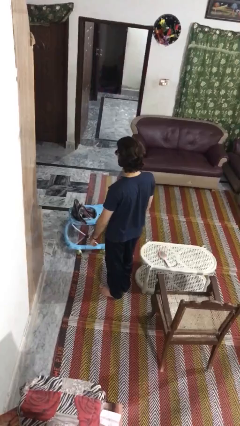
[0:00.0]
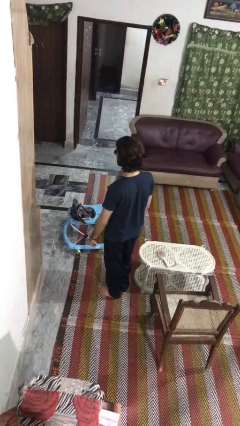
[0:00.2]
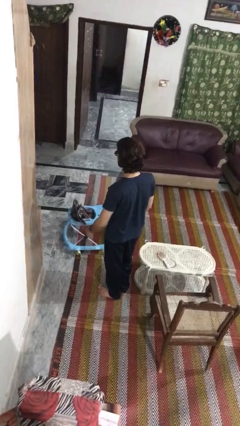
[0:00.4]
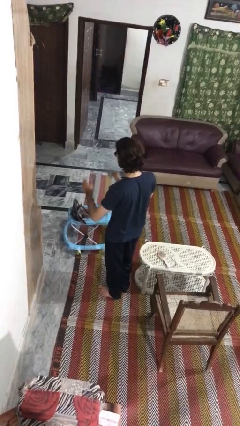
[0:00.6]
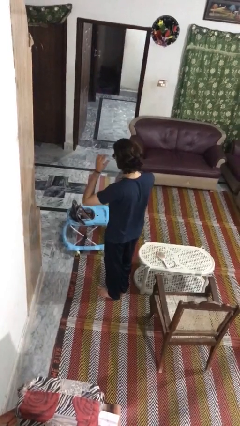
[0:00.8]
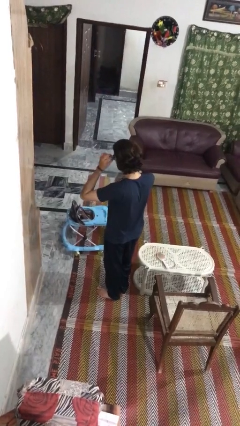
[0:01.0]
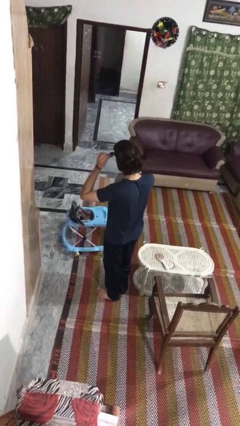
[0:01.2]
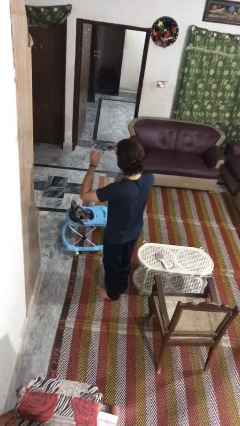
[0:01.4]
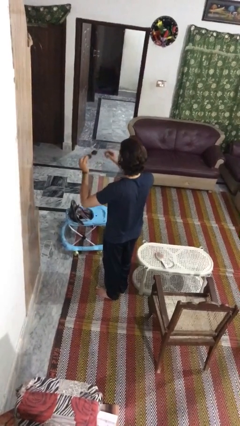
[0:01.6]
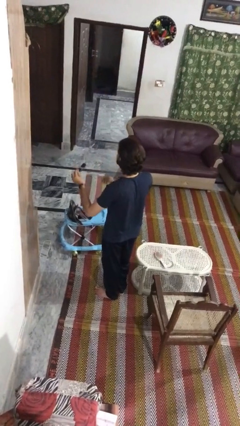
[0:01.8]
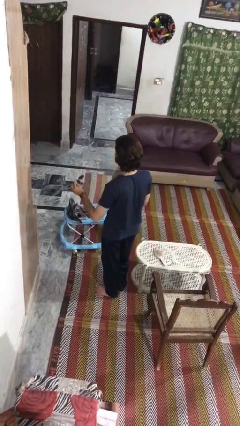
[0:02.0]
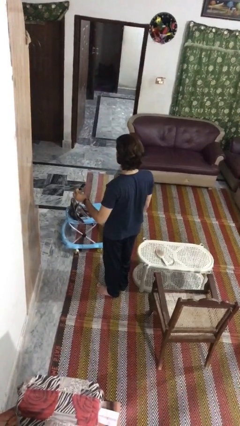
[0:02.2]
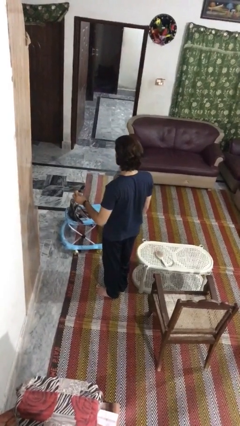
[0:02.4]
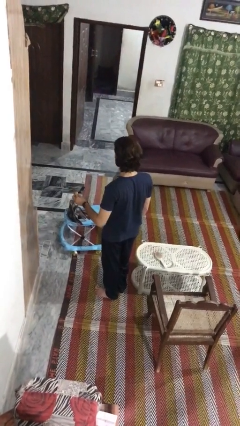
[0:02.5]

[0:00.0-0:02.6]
person takes off sunglasses

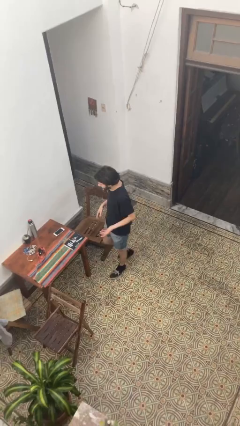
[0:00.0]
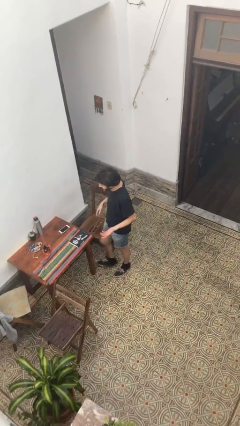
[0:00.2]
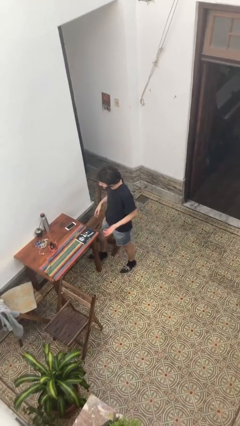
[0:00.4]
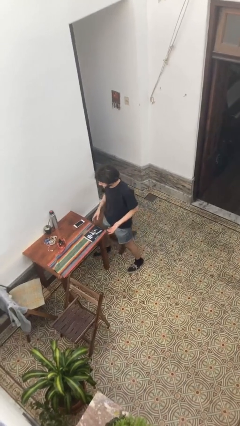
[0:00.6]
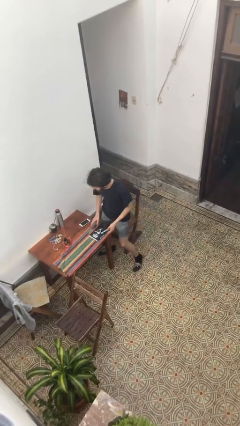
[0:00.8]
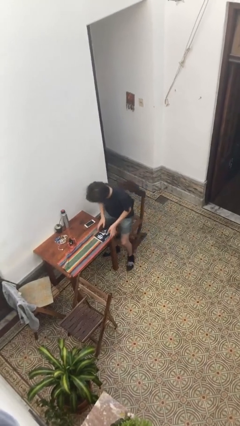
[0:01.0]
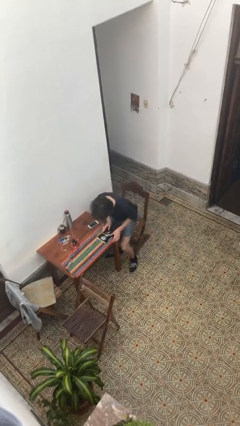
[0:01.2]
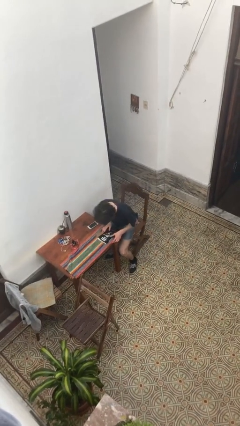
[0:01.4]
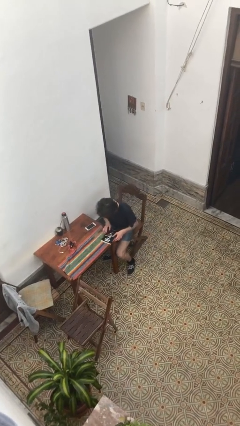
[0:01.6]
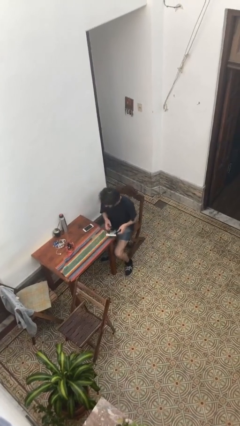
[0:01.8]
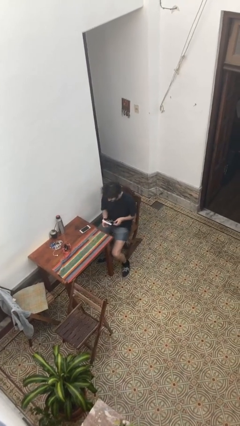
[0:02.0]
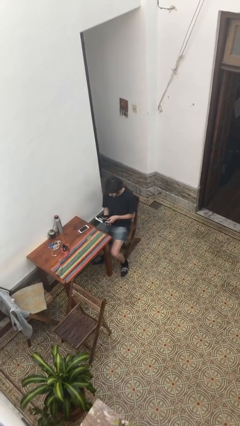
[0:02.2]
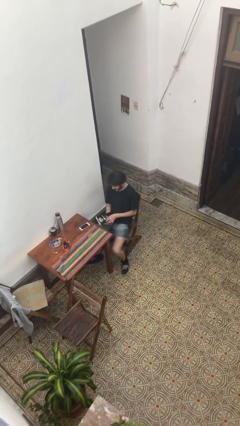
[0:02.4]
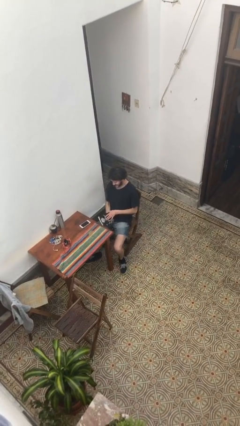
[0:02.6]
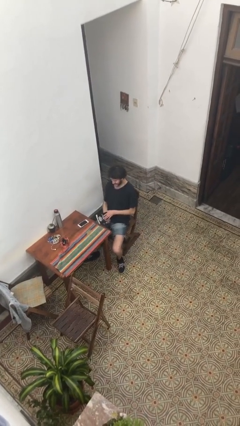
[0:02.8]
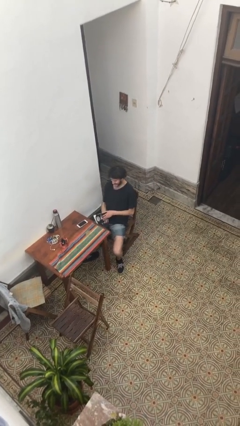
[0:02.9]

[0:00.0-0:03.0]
person sits down

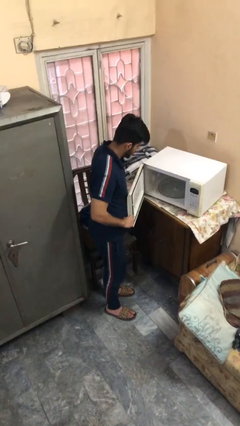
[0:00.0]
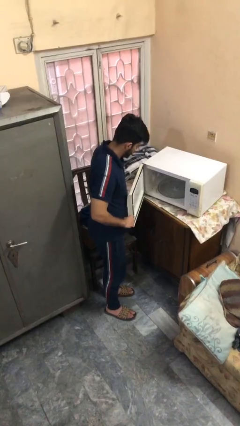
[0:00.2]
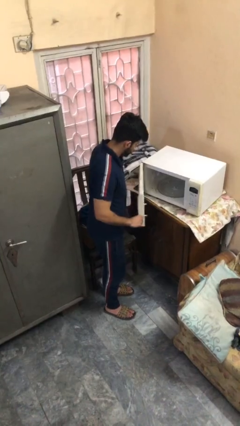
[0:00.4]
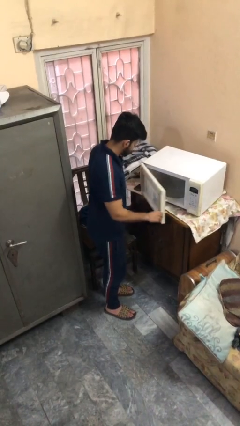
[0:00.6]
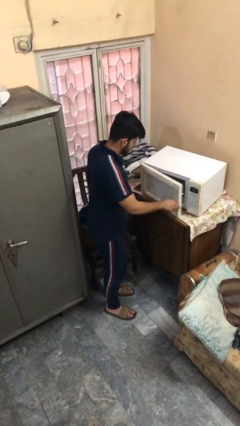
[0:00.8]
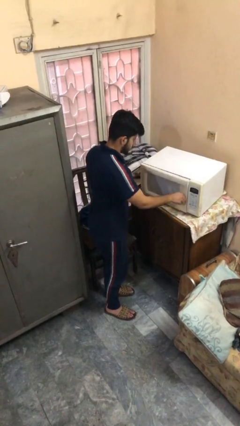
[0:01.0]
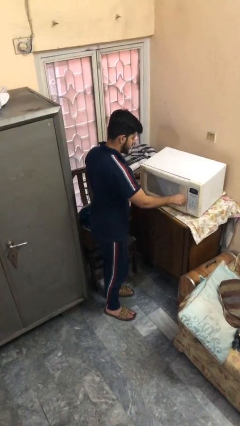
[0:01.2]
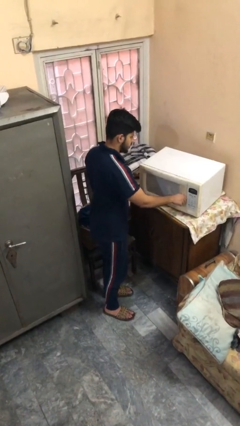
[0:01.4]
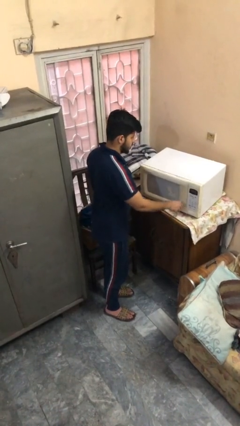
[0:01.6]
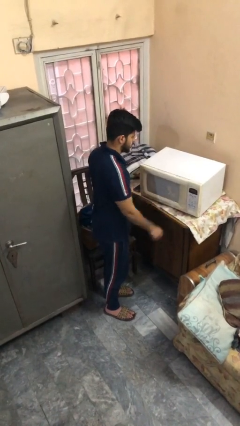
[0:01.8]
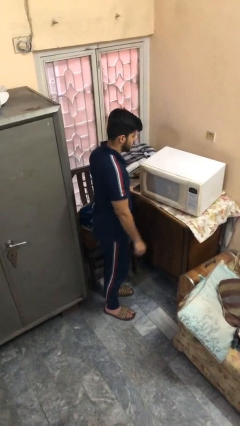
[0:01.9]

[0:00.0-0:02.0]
person closes microwave

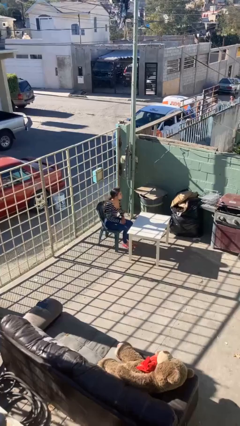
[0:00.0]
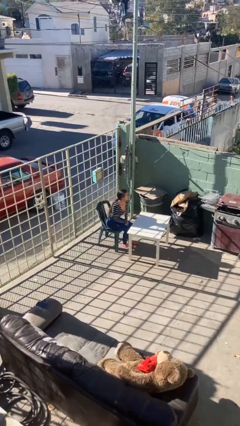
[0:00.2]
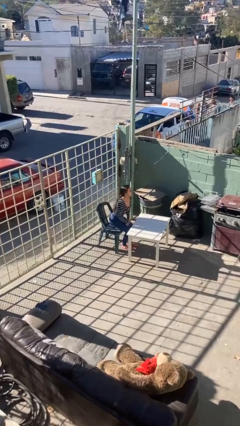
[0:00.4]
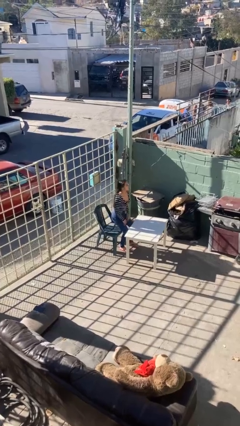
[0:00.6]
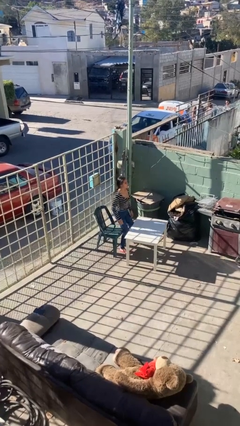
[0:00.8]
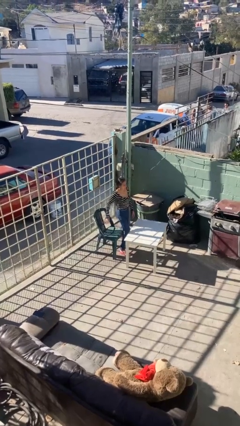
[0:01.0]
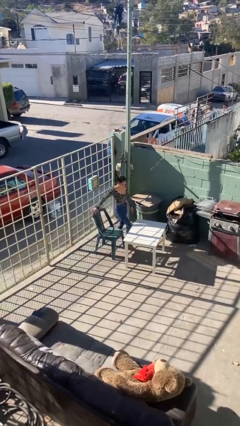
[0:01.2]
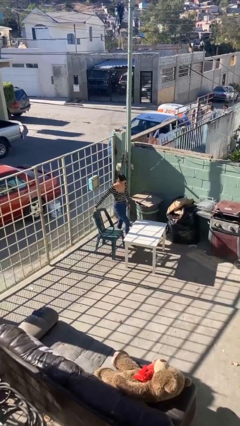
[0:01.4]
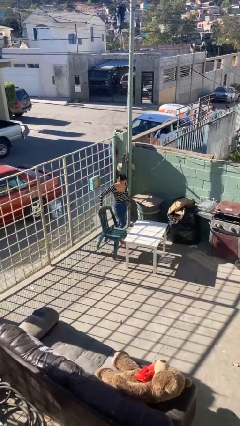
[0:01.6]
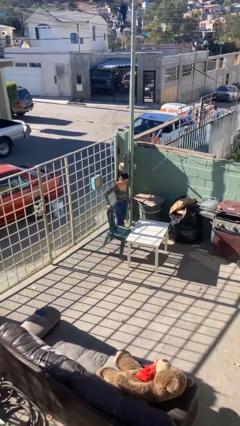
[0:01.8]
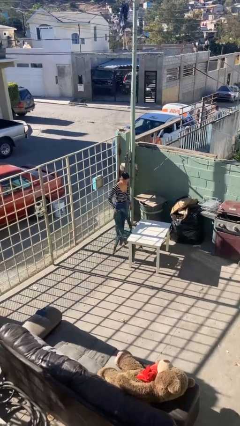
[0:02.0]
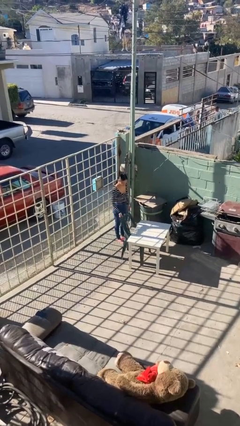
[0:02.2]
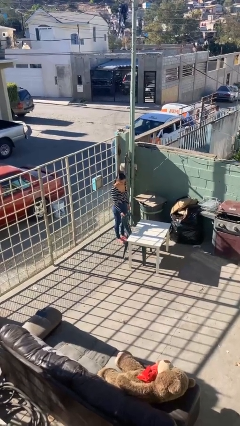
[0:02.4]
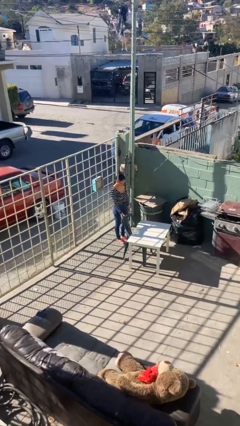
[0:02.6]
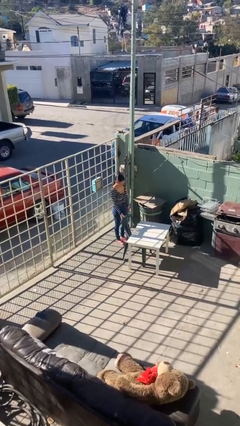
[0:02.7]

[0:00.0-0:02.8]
person stands up

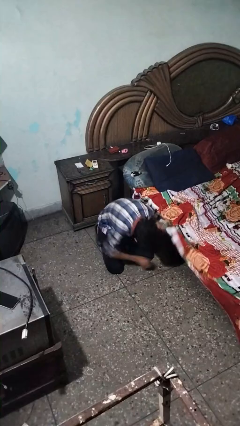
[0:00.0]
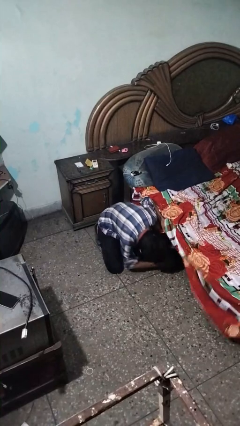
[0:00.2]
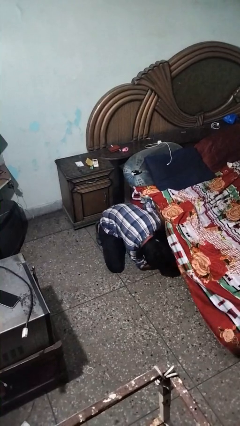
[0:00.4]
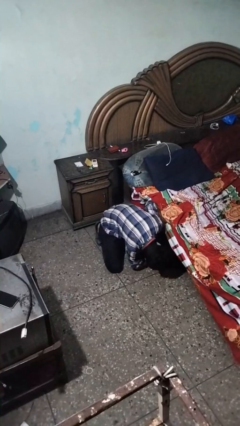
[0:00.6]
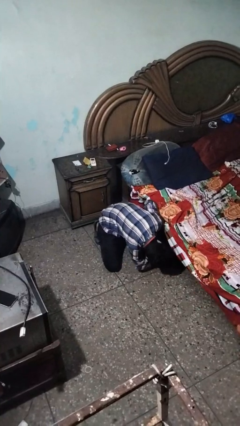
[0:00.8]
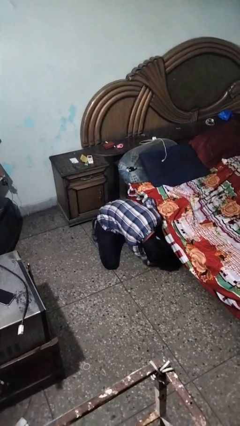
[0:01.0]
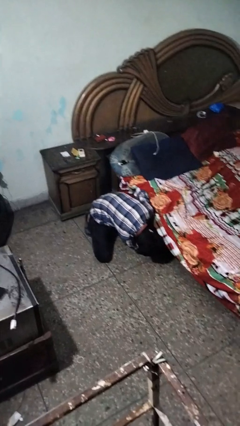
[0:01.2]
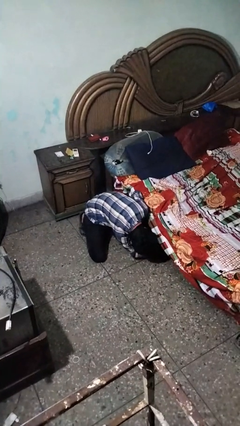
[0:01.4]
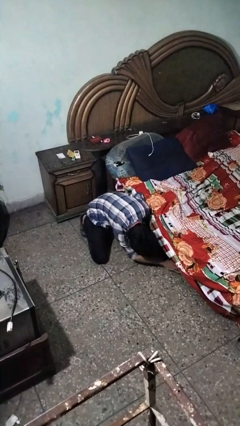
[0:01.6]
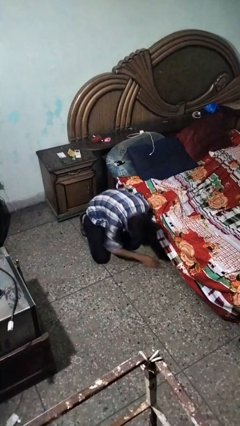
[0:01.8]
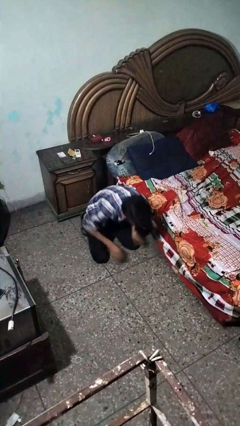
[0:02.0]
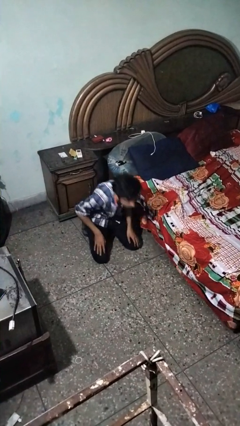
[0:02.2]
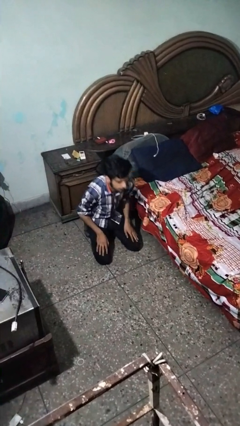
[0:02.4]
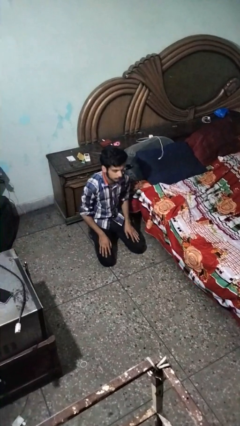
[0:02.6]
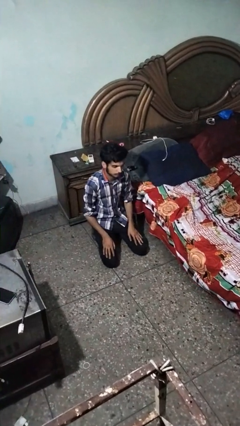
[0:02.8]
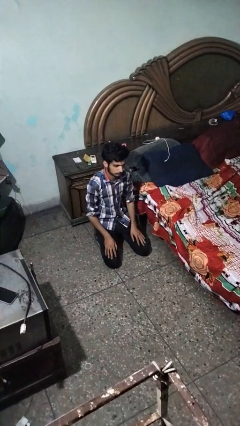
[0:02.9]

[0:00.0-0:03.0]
person searches under bed

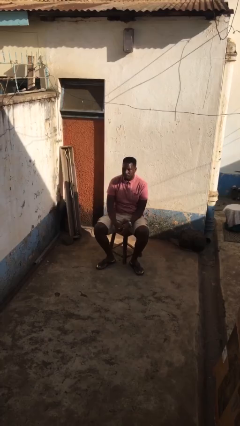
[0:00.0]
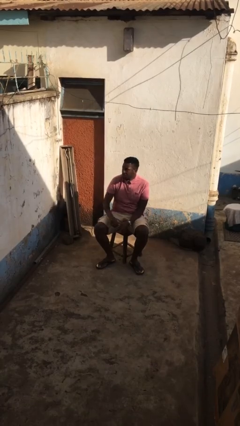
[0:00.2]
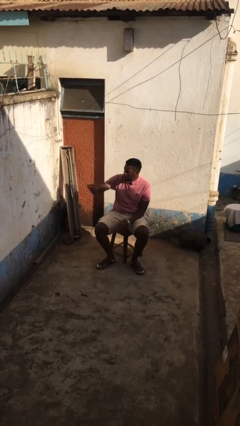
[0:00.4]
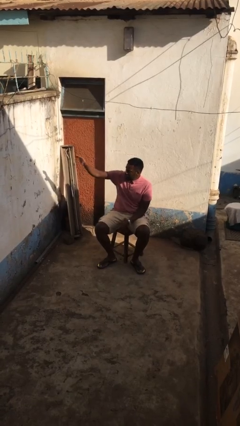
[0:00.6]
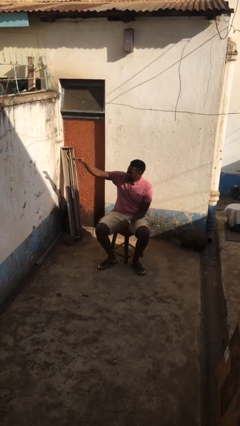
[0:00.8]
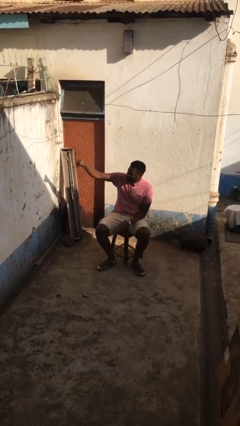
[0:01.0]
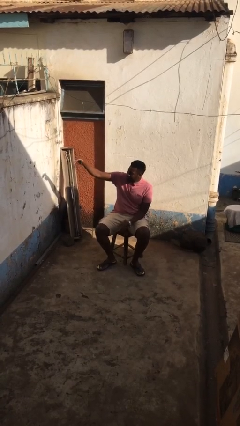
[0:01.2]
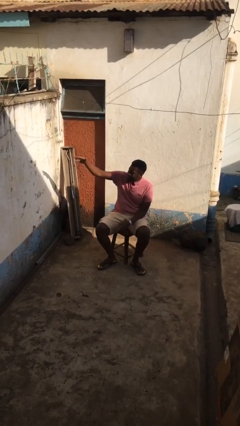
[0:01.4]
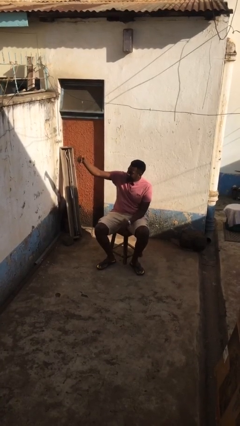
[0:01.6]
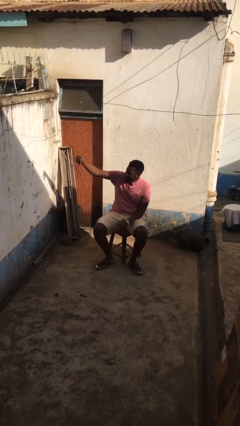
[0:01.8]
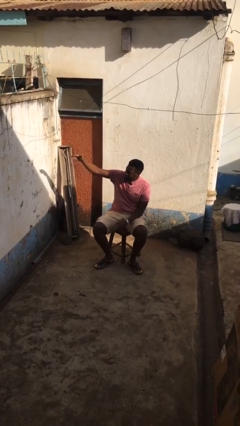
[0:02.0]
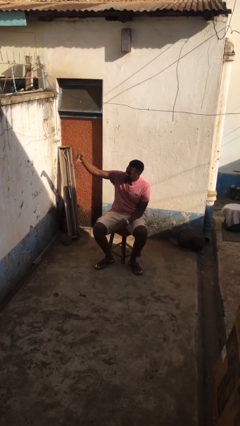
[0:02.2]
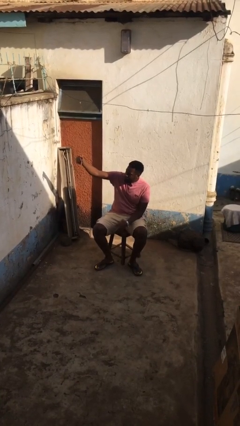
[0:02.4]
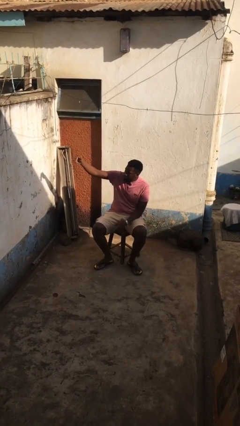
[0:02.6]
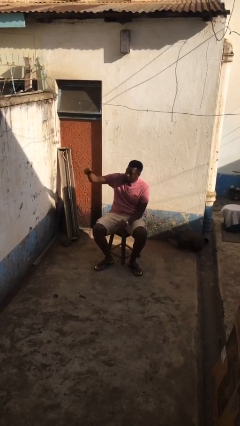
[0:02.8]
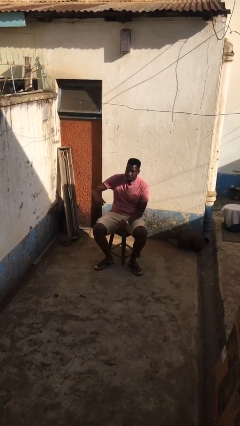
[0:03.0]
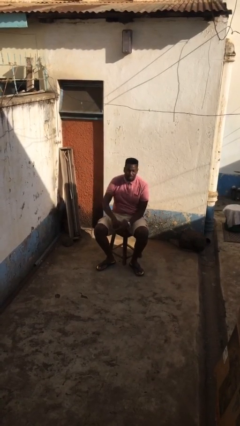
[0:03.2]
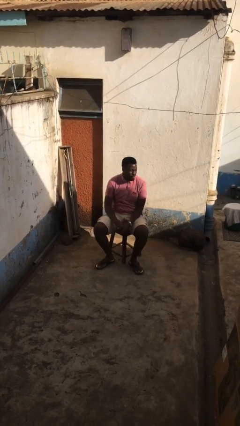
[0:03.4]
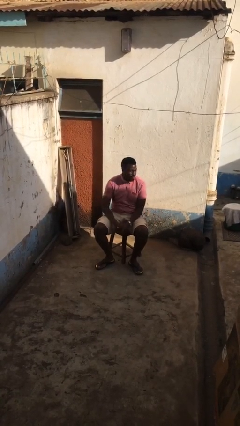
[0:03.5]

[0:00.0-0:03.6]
person gestures come here

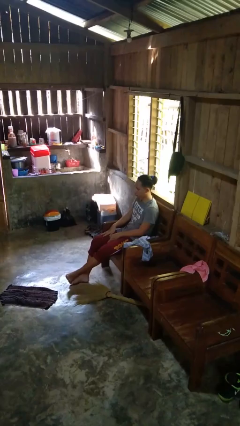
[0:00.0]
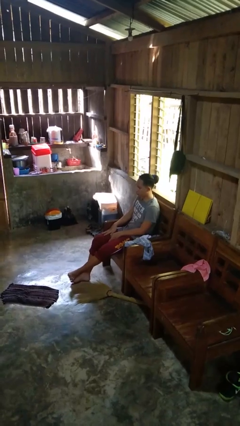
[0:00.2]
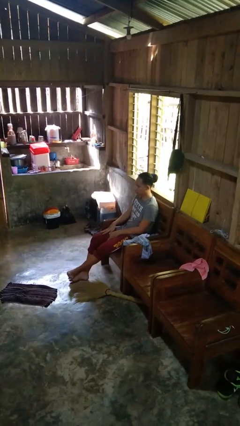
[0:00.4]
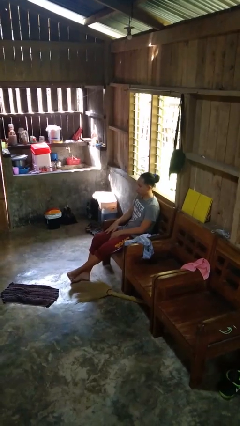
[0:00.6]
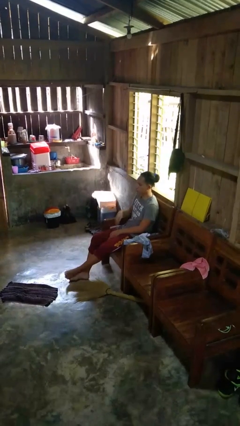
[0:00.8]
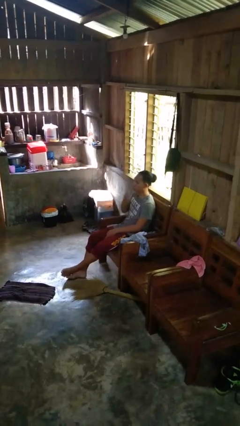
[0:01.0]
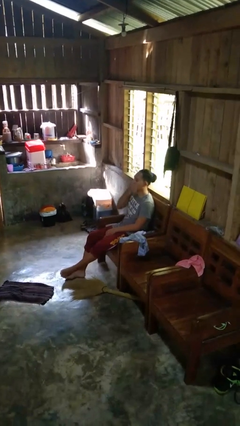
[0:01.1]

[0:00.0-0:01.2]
person yawns
